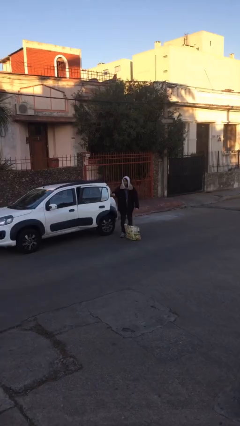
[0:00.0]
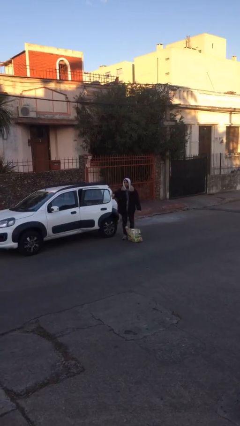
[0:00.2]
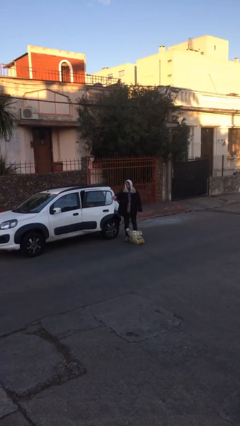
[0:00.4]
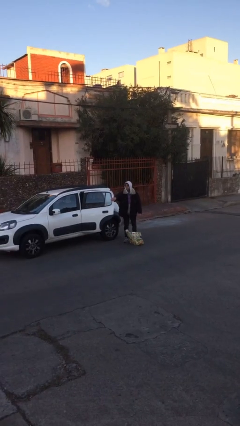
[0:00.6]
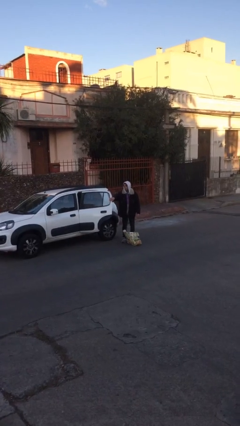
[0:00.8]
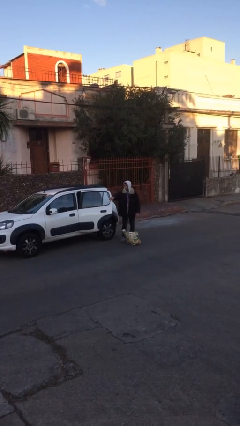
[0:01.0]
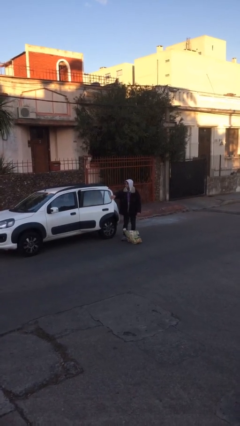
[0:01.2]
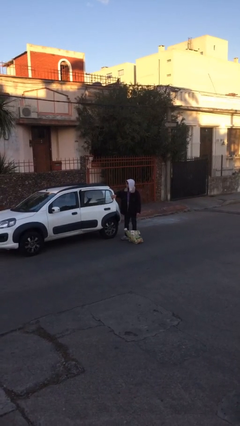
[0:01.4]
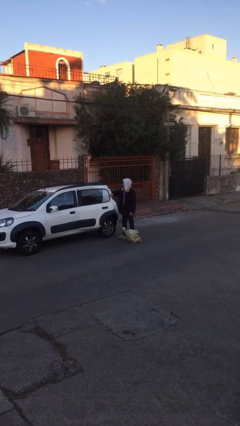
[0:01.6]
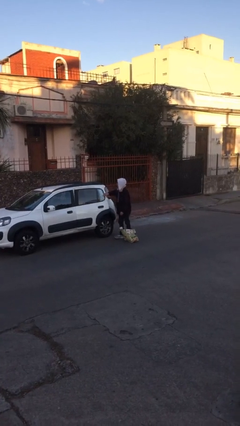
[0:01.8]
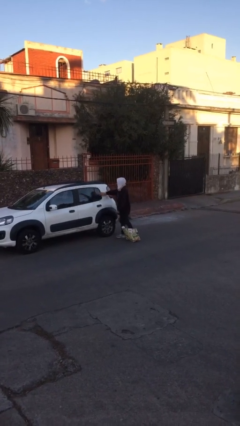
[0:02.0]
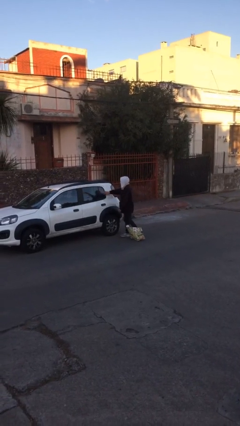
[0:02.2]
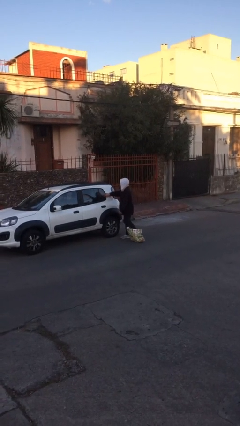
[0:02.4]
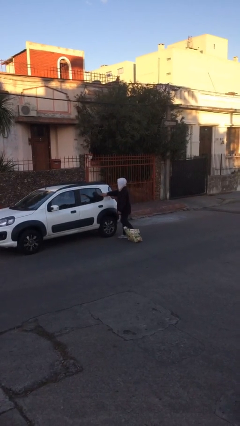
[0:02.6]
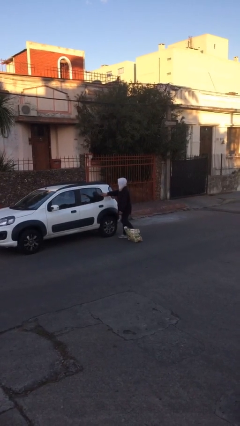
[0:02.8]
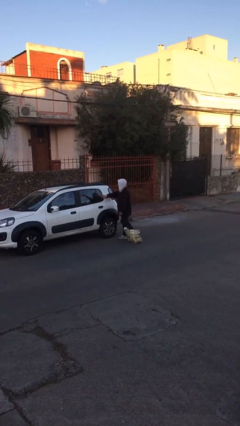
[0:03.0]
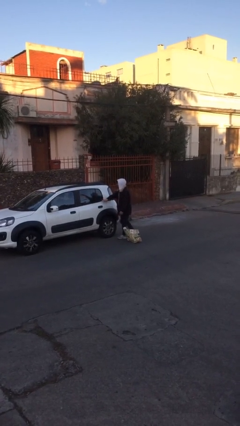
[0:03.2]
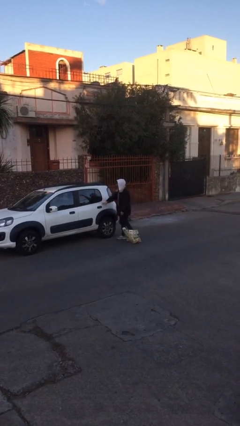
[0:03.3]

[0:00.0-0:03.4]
person closes car door

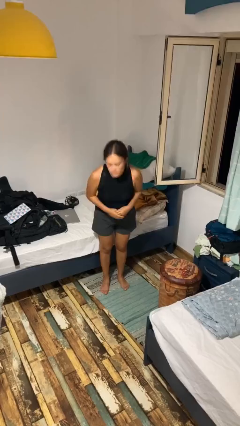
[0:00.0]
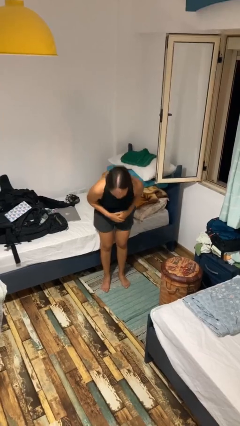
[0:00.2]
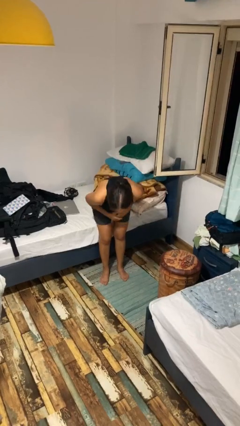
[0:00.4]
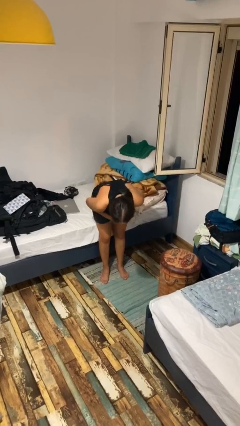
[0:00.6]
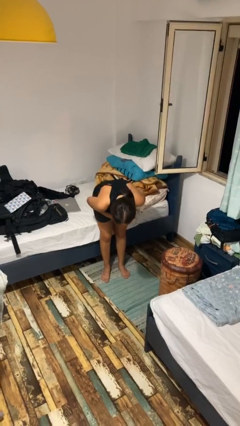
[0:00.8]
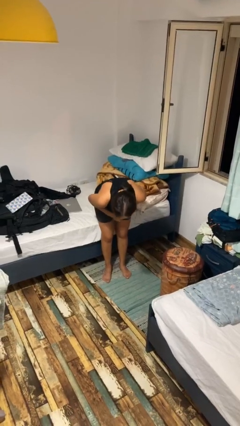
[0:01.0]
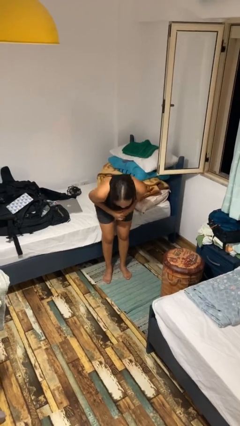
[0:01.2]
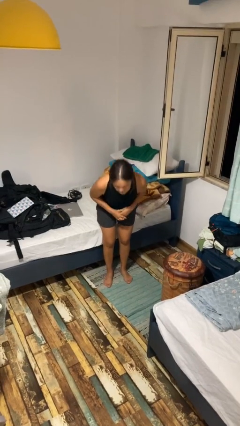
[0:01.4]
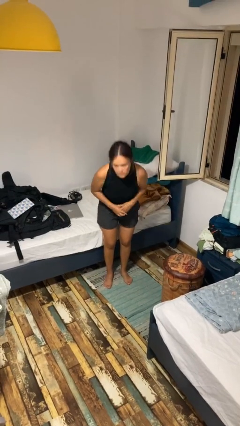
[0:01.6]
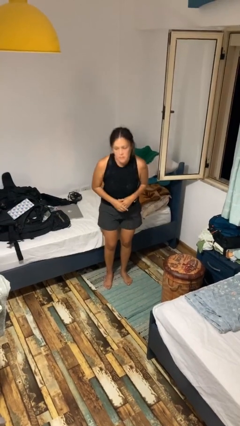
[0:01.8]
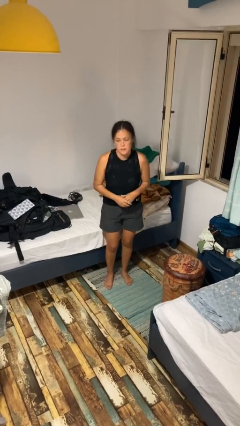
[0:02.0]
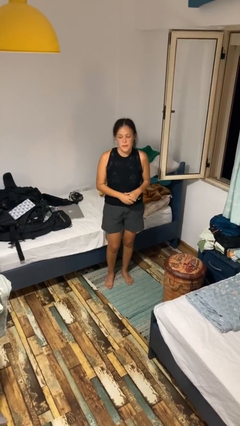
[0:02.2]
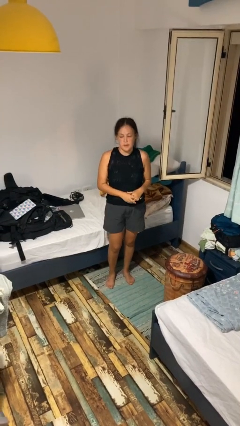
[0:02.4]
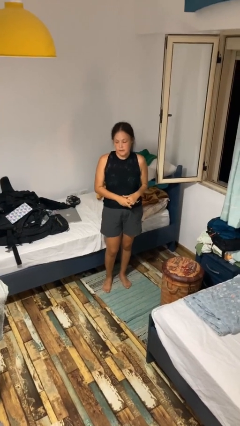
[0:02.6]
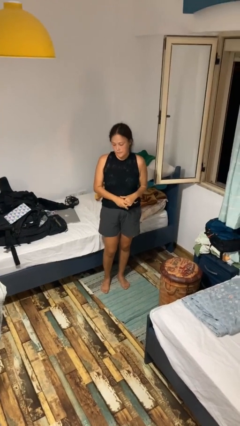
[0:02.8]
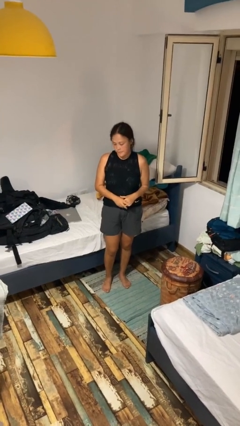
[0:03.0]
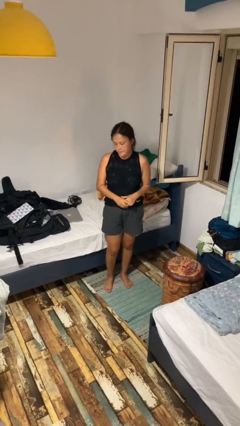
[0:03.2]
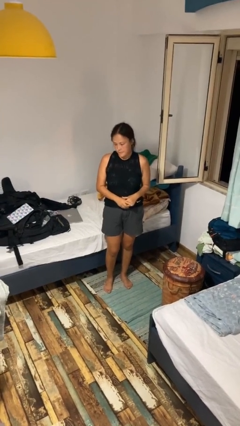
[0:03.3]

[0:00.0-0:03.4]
person bows

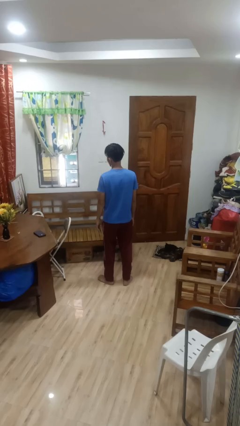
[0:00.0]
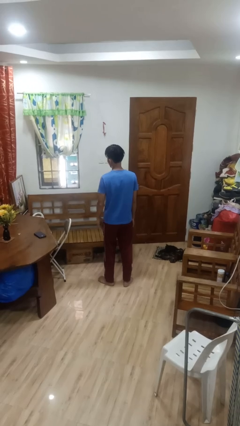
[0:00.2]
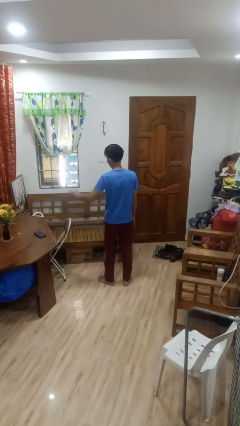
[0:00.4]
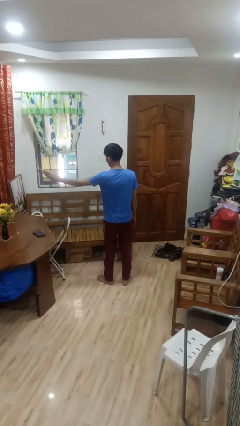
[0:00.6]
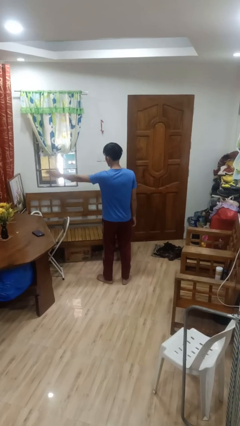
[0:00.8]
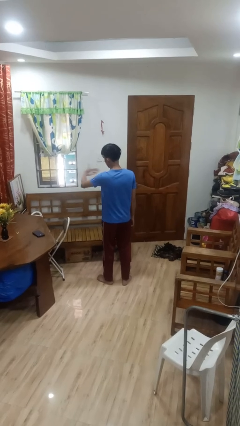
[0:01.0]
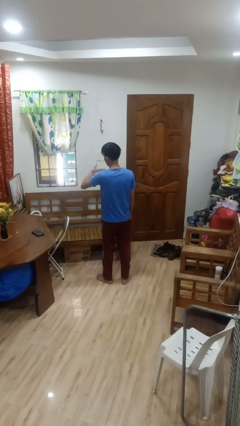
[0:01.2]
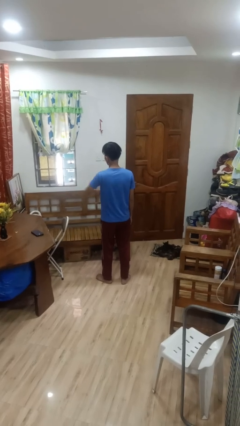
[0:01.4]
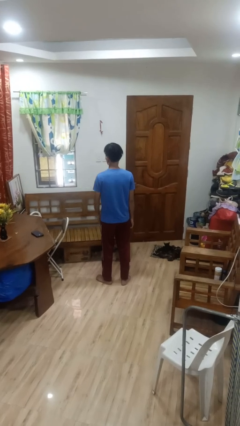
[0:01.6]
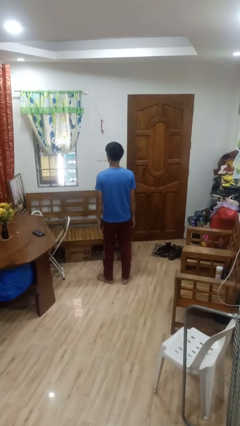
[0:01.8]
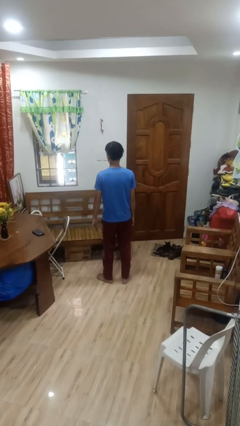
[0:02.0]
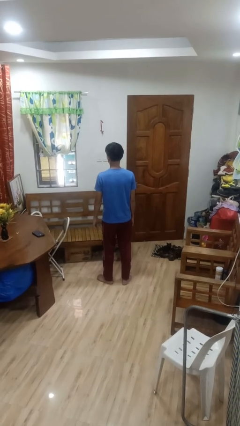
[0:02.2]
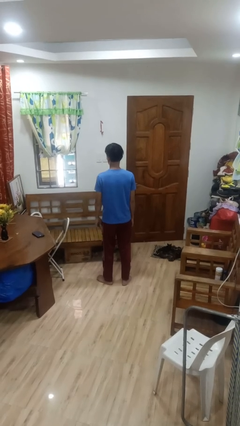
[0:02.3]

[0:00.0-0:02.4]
person gestures swipe right

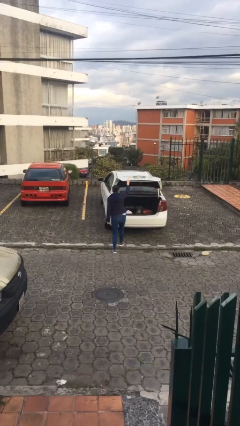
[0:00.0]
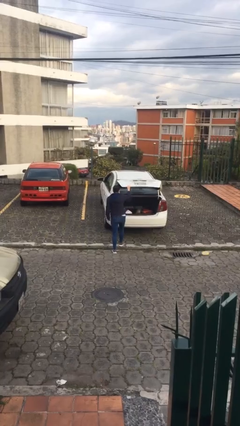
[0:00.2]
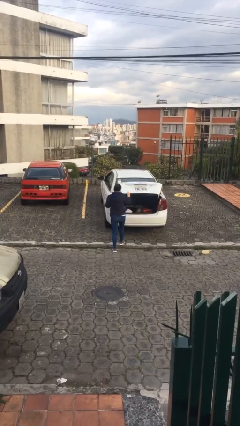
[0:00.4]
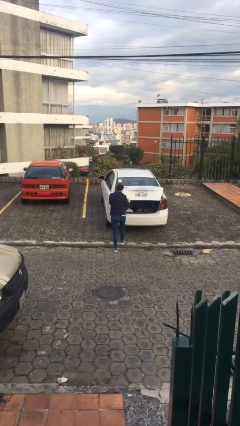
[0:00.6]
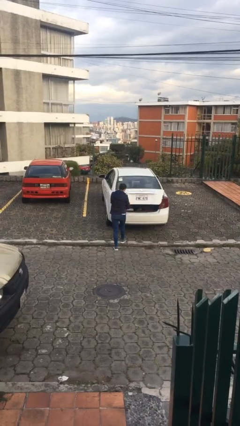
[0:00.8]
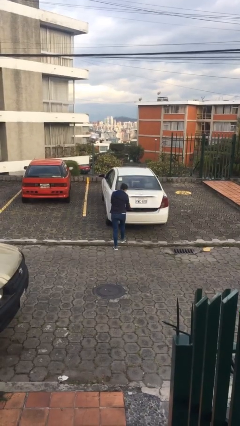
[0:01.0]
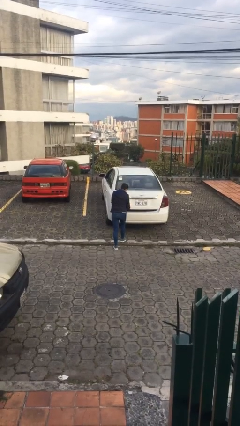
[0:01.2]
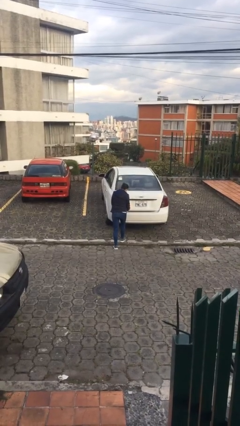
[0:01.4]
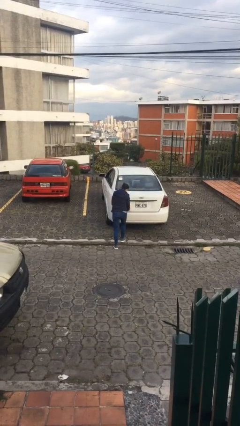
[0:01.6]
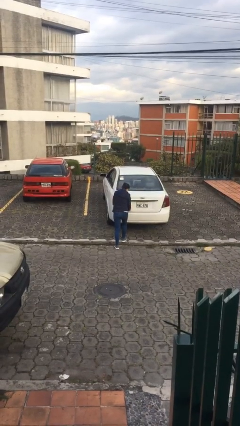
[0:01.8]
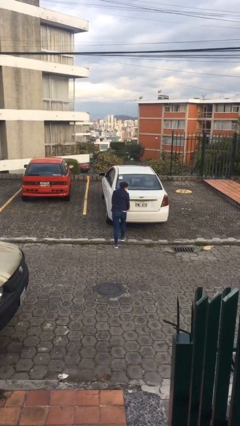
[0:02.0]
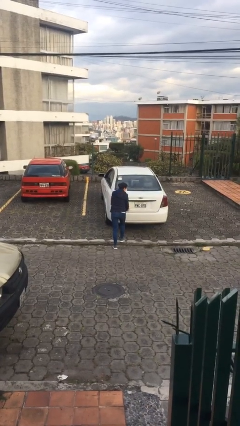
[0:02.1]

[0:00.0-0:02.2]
person closes car trunk

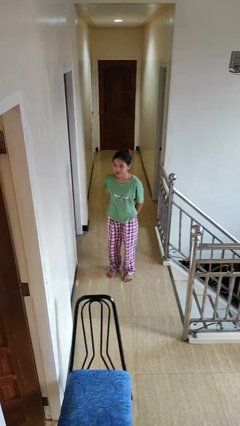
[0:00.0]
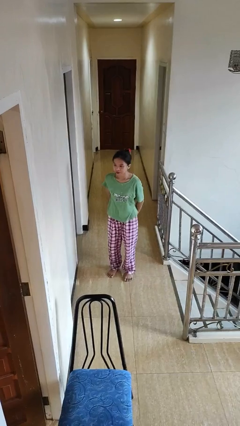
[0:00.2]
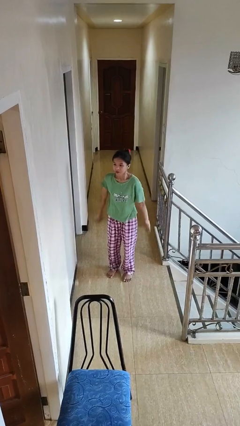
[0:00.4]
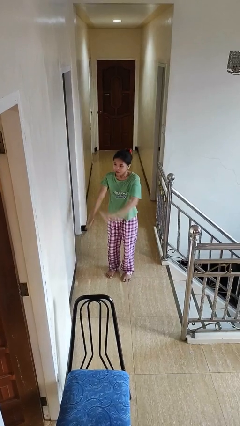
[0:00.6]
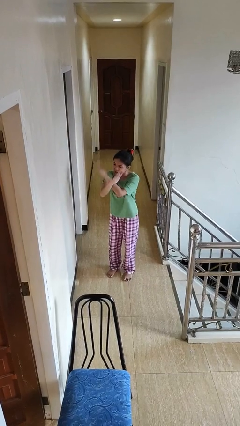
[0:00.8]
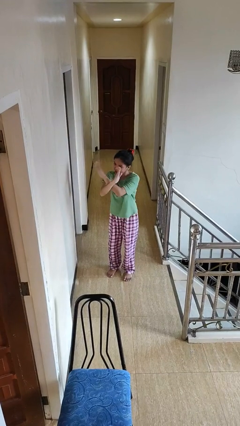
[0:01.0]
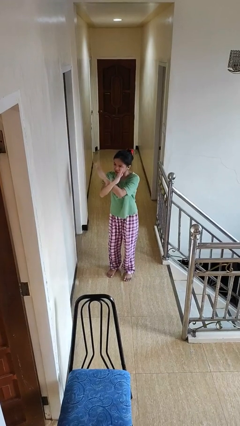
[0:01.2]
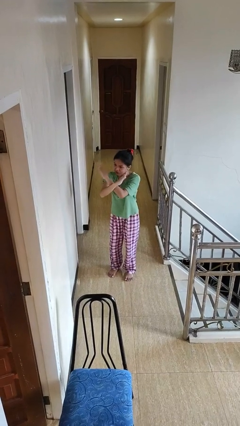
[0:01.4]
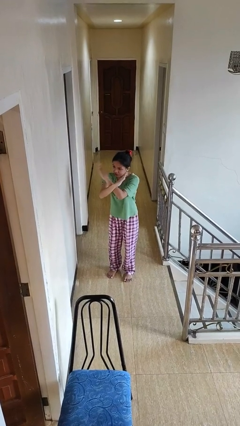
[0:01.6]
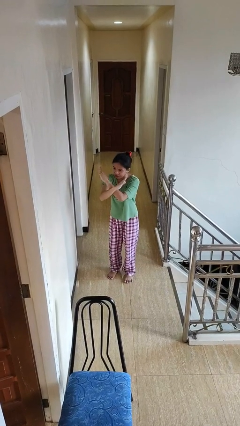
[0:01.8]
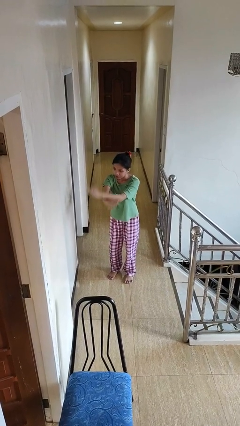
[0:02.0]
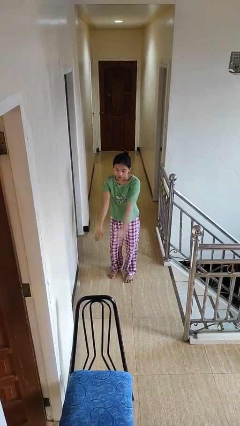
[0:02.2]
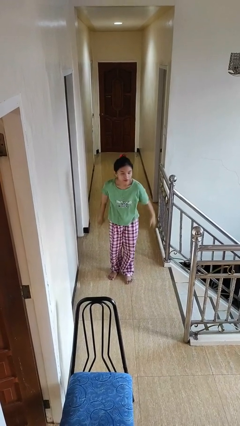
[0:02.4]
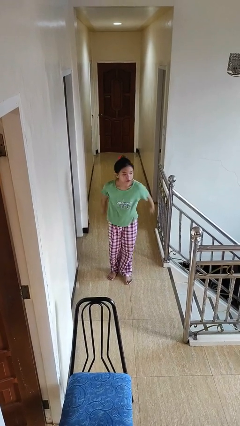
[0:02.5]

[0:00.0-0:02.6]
person gestures arms x

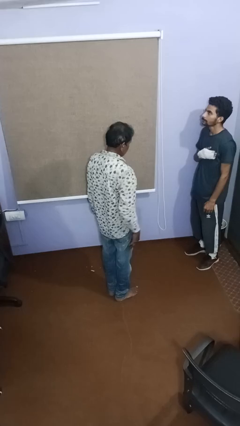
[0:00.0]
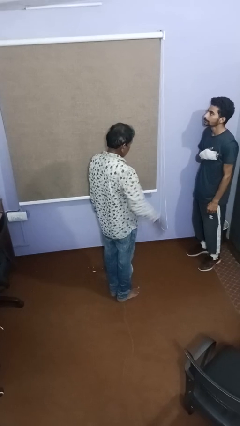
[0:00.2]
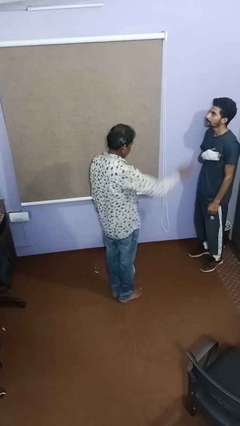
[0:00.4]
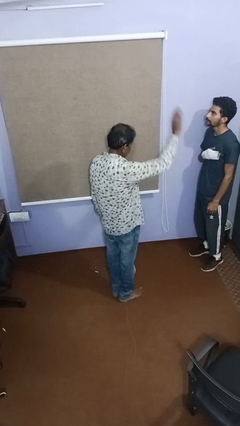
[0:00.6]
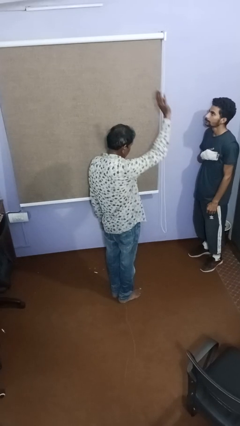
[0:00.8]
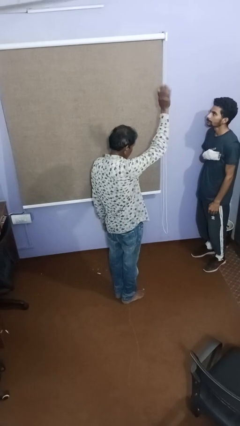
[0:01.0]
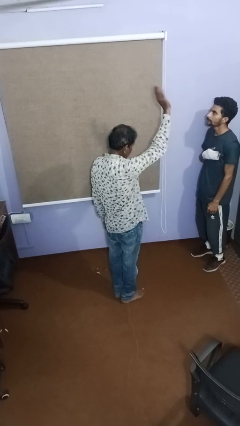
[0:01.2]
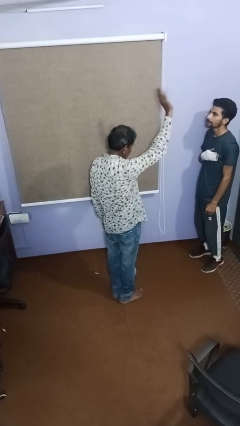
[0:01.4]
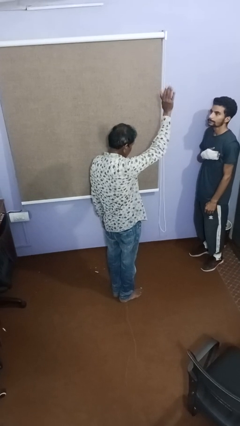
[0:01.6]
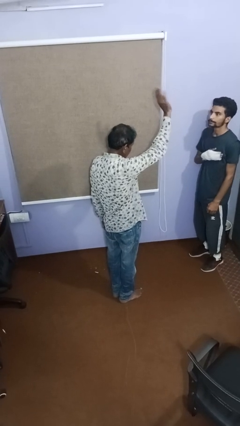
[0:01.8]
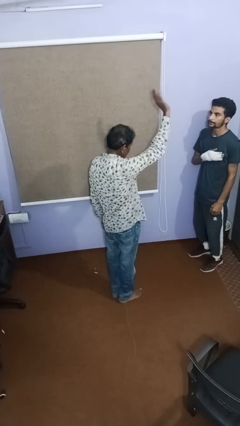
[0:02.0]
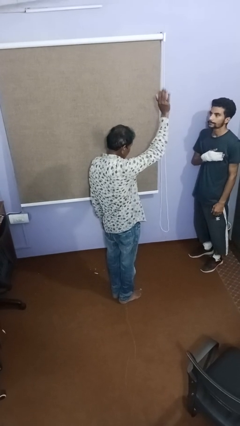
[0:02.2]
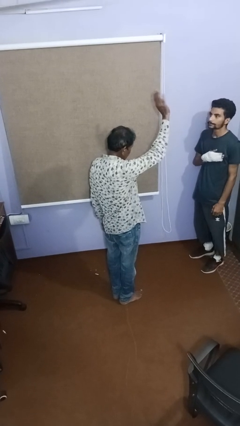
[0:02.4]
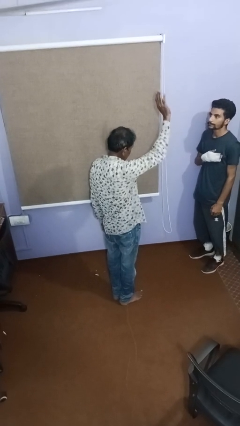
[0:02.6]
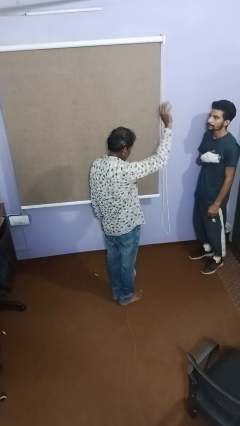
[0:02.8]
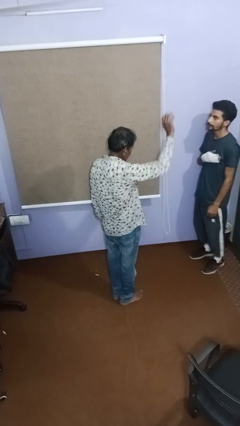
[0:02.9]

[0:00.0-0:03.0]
person waves at person
